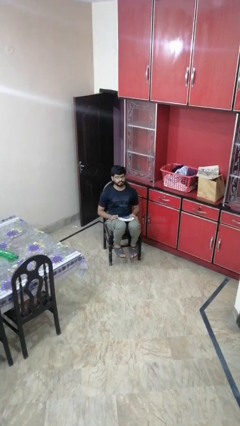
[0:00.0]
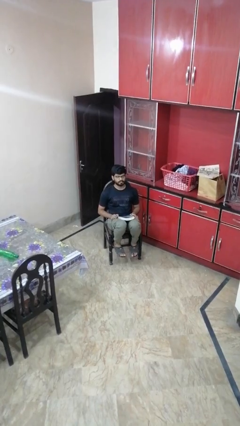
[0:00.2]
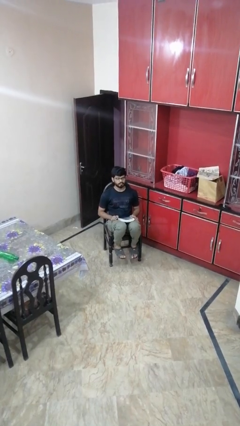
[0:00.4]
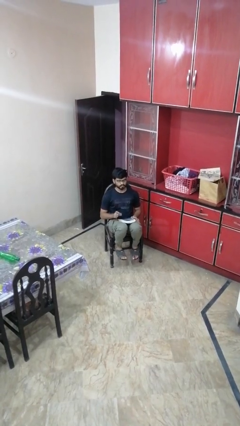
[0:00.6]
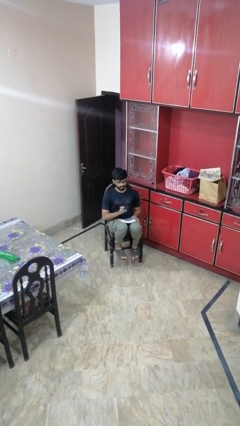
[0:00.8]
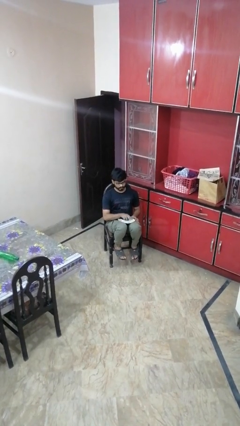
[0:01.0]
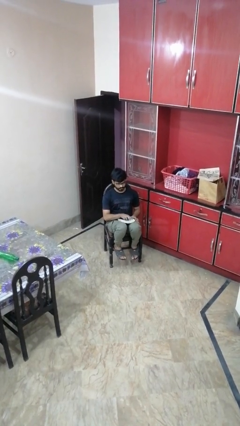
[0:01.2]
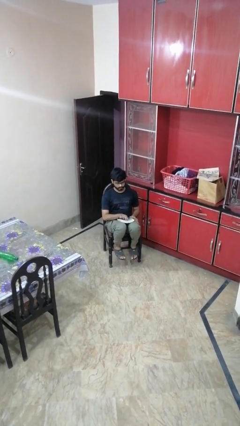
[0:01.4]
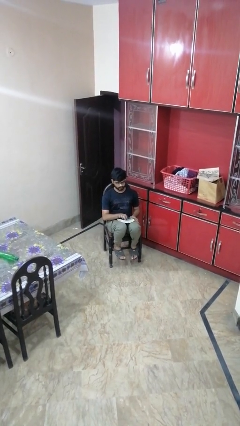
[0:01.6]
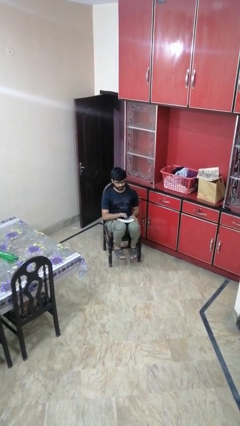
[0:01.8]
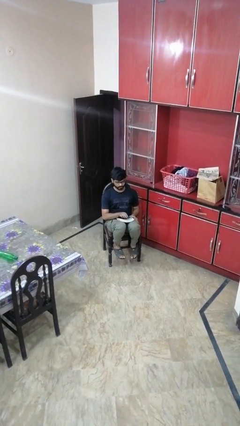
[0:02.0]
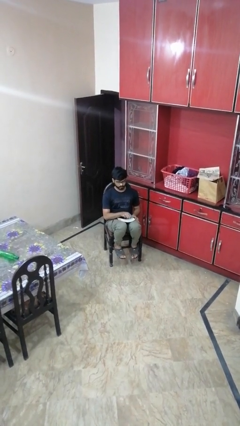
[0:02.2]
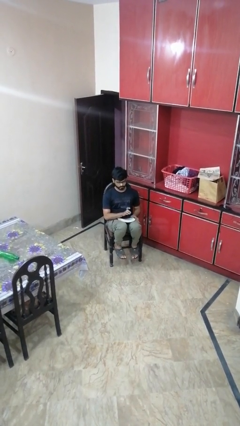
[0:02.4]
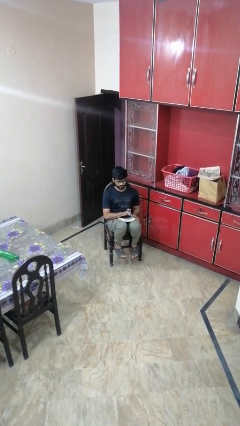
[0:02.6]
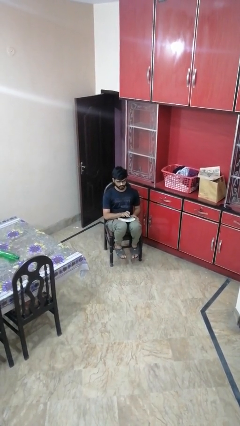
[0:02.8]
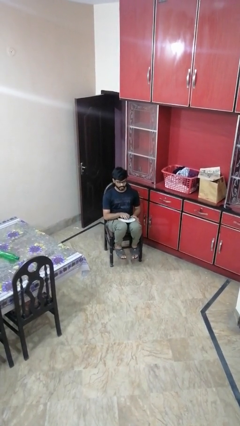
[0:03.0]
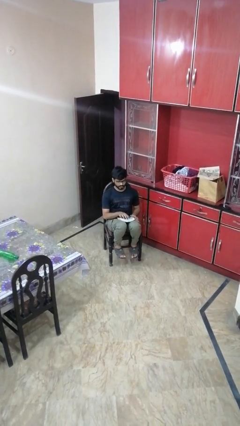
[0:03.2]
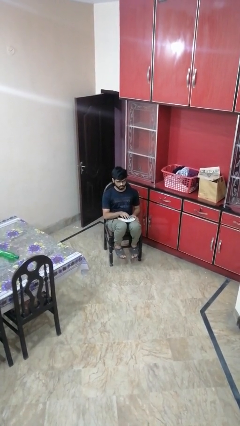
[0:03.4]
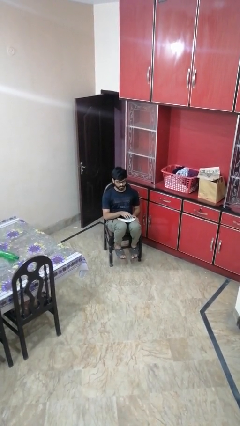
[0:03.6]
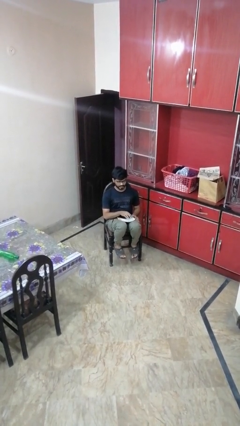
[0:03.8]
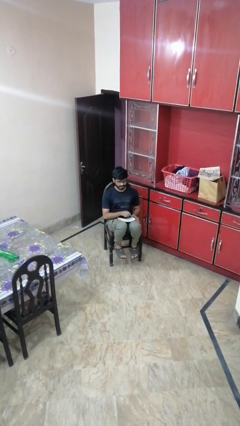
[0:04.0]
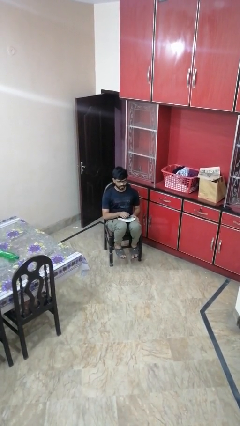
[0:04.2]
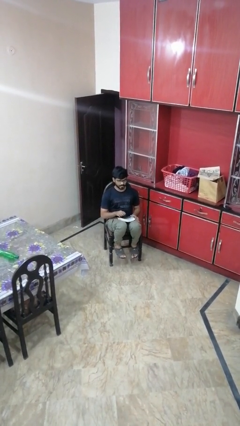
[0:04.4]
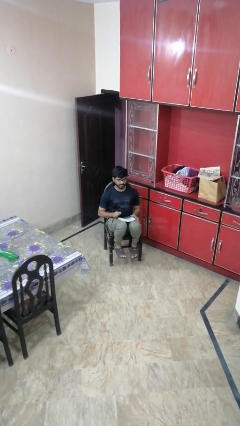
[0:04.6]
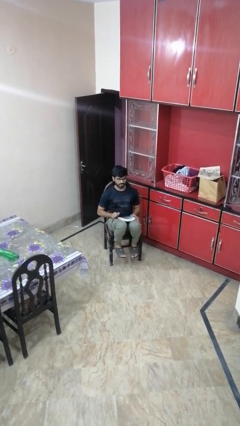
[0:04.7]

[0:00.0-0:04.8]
person taps object with finger

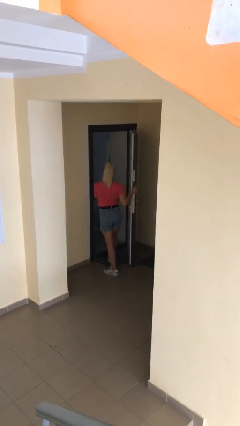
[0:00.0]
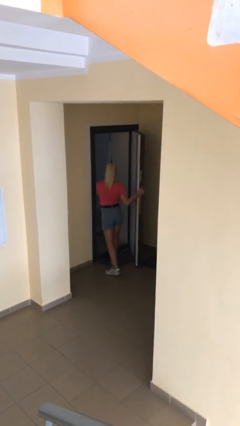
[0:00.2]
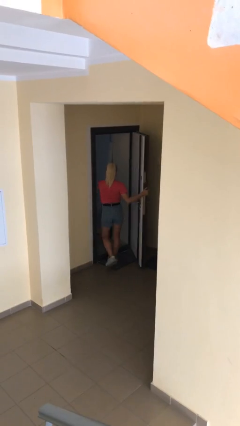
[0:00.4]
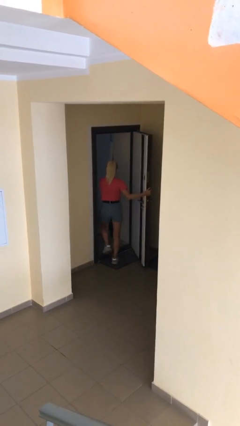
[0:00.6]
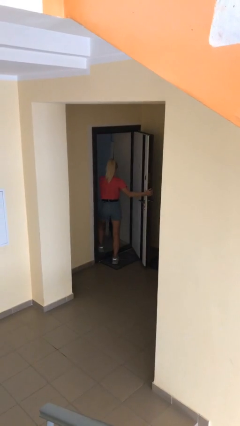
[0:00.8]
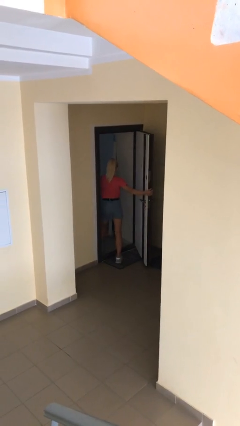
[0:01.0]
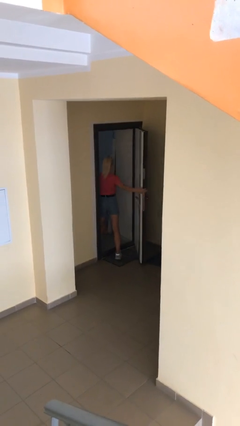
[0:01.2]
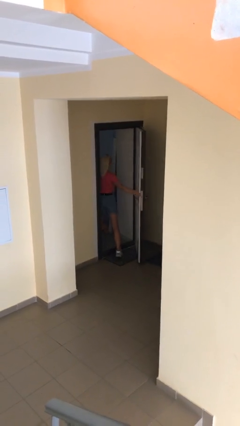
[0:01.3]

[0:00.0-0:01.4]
person exits scene through structure

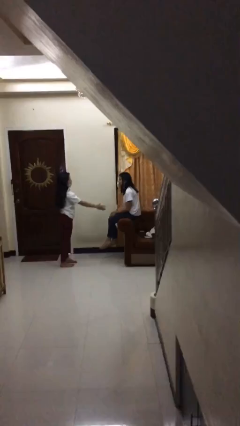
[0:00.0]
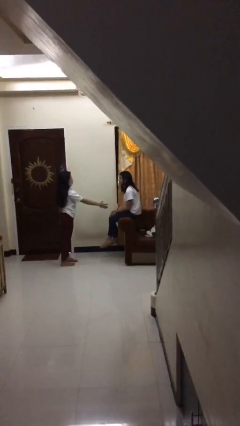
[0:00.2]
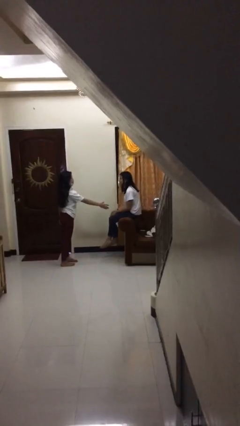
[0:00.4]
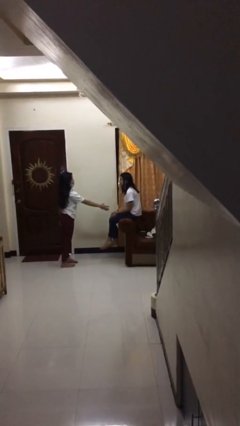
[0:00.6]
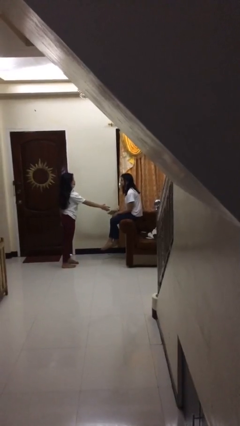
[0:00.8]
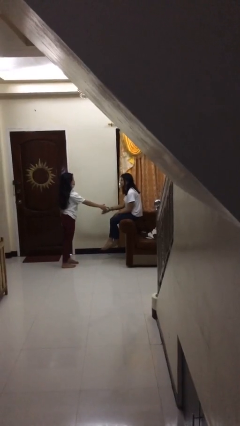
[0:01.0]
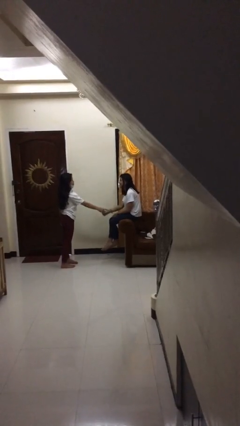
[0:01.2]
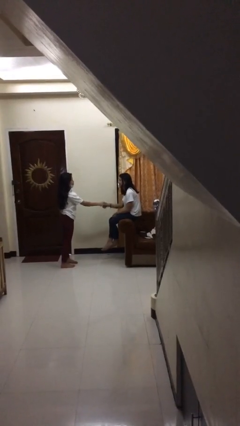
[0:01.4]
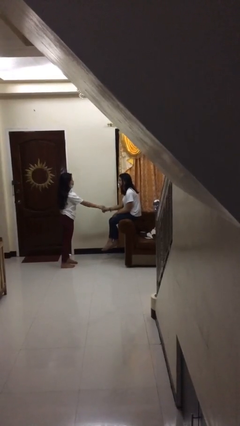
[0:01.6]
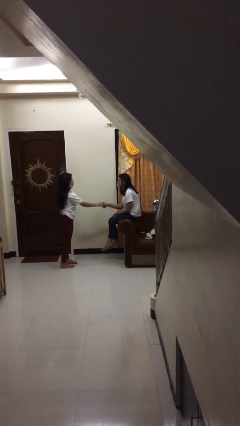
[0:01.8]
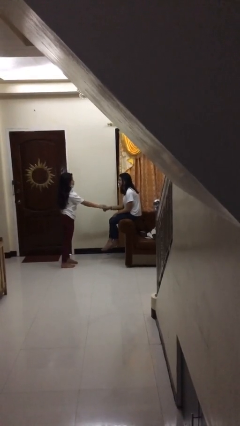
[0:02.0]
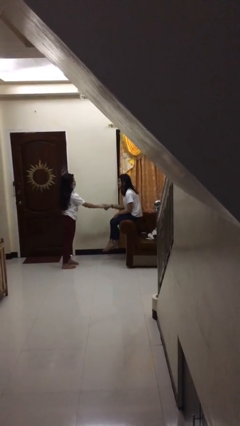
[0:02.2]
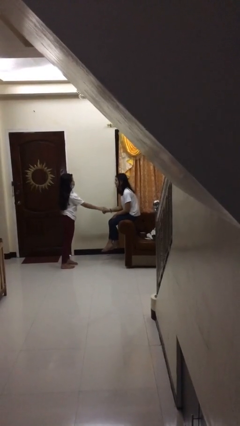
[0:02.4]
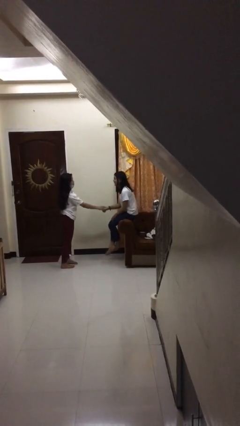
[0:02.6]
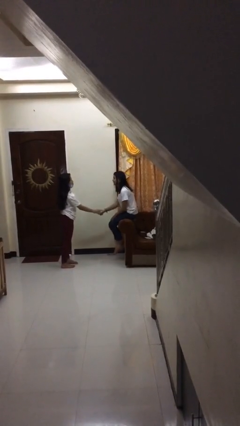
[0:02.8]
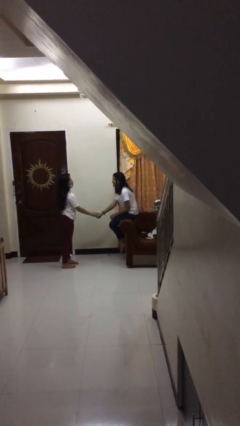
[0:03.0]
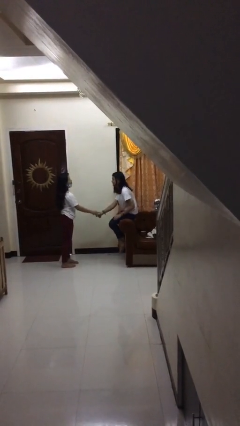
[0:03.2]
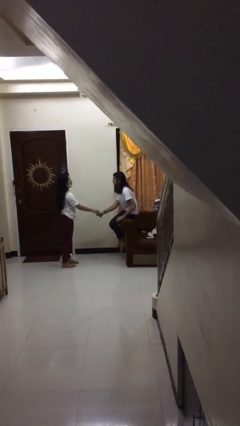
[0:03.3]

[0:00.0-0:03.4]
person shakes hand

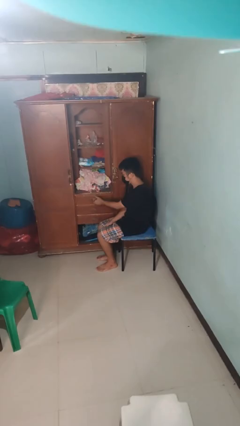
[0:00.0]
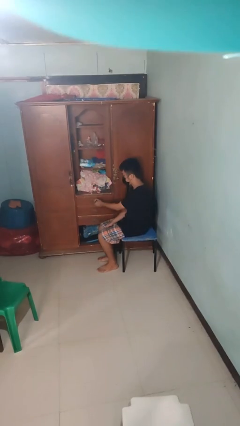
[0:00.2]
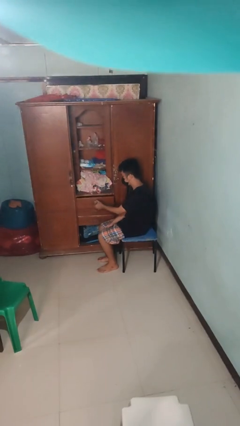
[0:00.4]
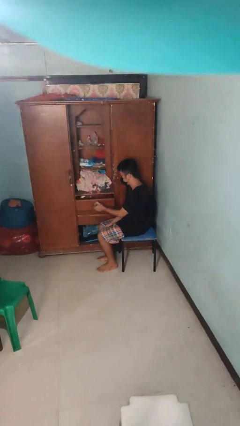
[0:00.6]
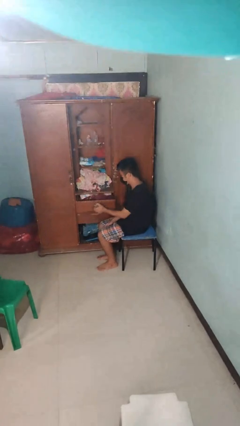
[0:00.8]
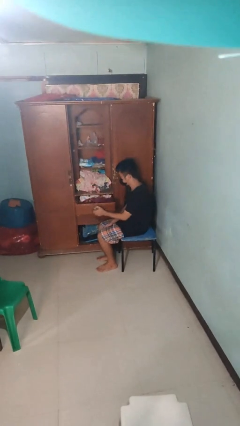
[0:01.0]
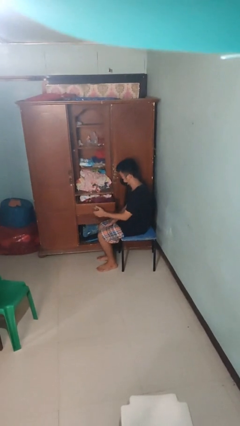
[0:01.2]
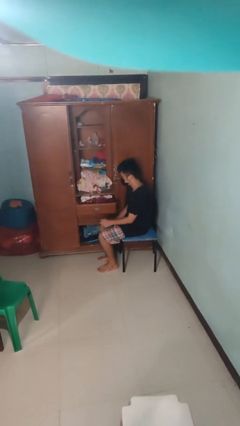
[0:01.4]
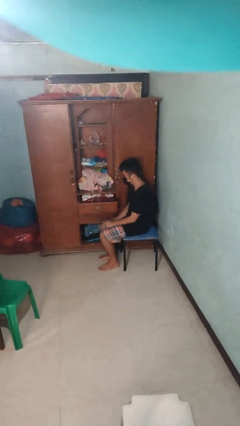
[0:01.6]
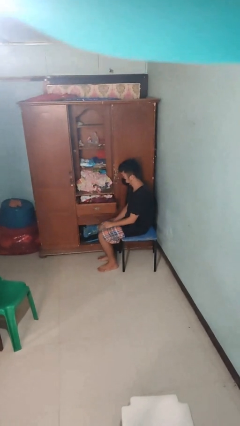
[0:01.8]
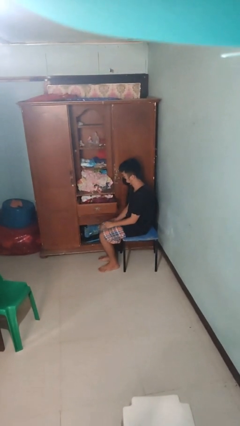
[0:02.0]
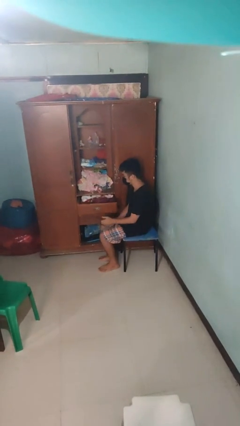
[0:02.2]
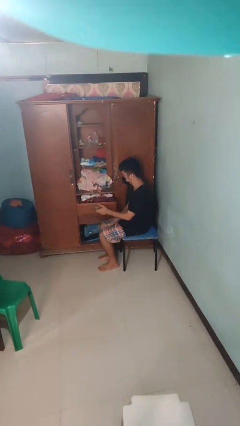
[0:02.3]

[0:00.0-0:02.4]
person opens dresser drawer

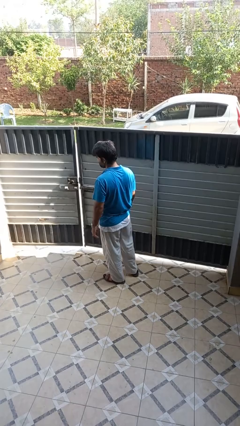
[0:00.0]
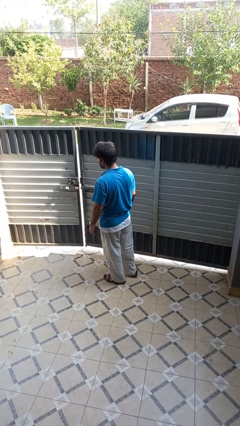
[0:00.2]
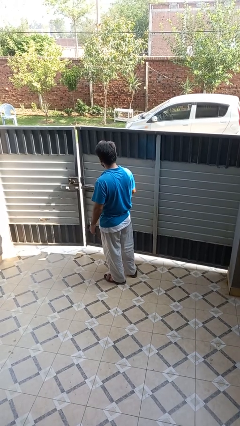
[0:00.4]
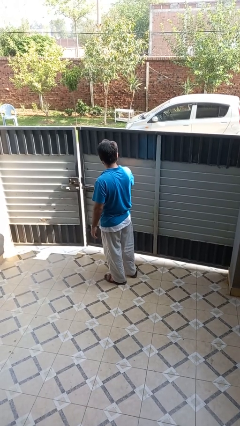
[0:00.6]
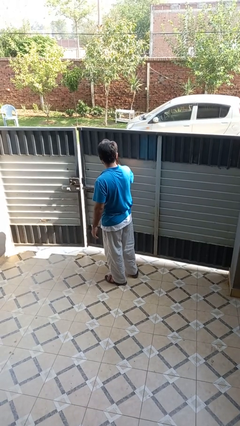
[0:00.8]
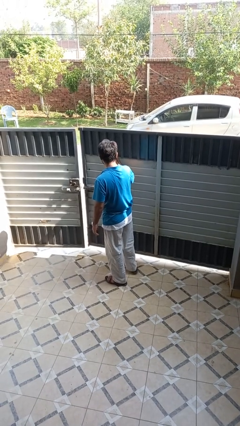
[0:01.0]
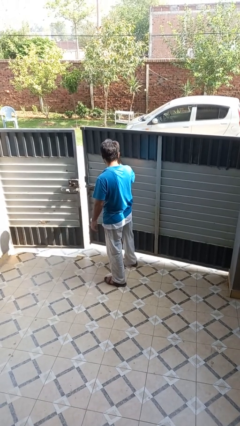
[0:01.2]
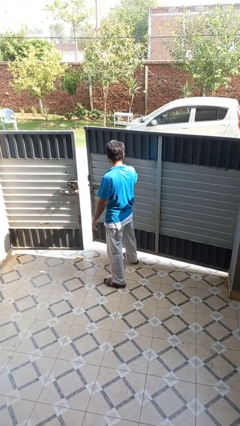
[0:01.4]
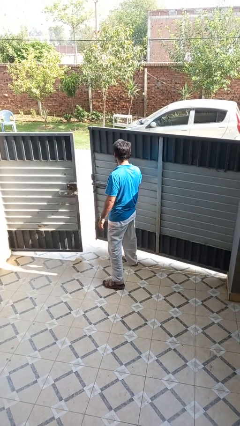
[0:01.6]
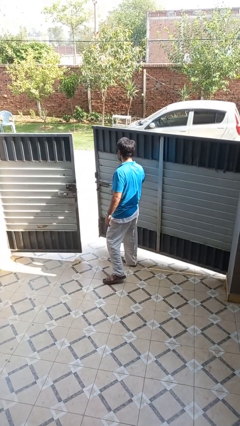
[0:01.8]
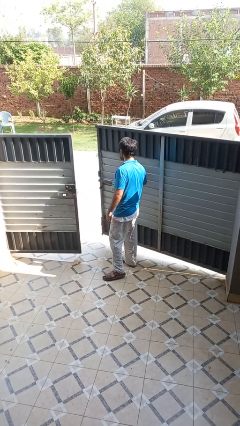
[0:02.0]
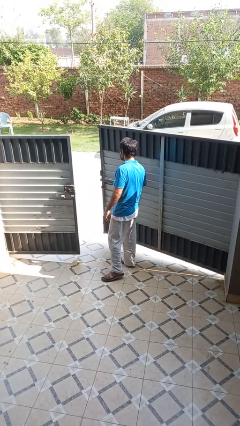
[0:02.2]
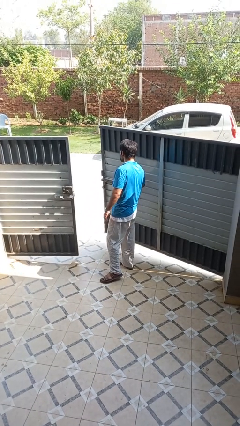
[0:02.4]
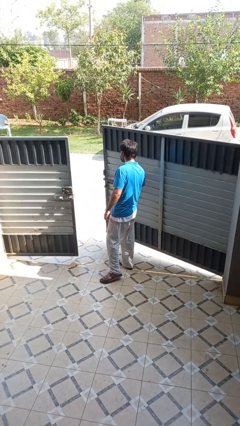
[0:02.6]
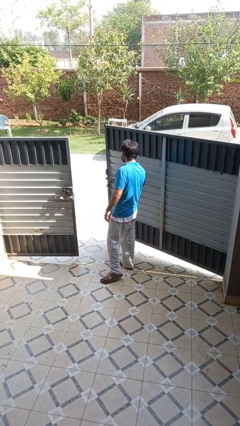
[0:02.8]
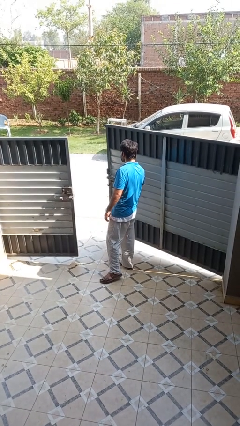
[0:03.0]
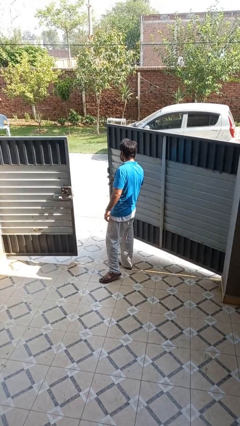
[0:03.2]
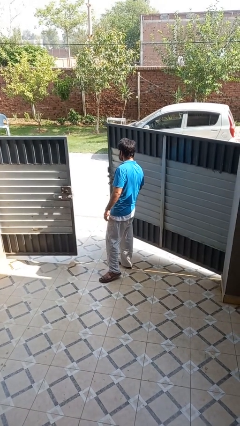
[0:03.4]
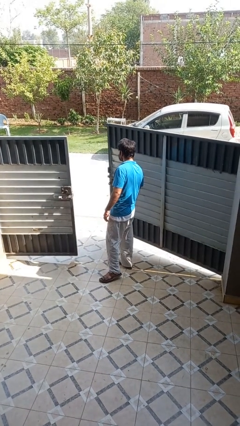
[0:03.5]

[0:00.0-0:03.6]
person opens gate

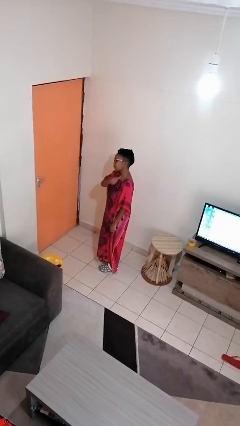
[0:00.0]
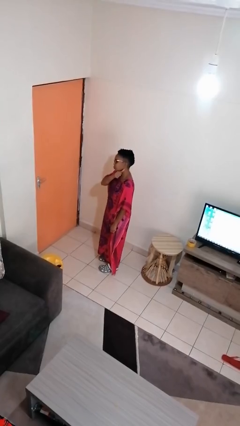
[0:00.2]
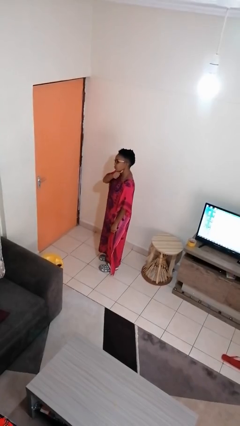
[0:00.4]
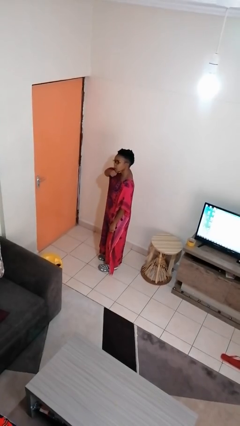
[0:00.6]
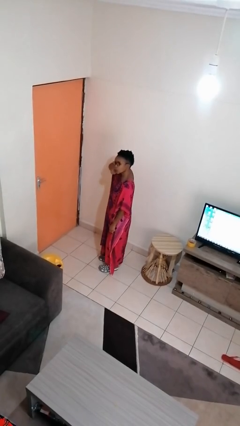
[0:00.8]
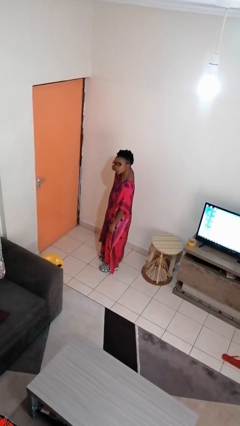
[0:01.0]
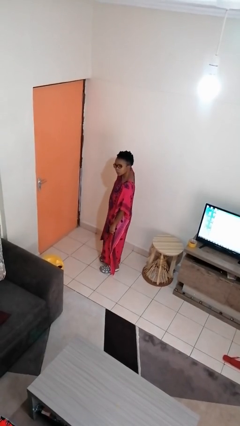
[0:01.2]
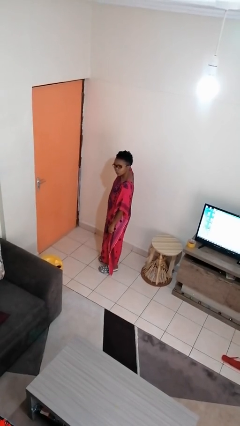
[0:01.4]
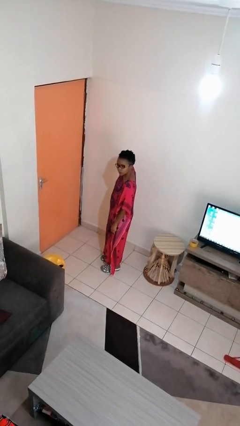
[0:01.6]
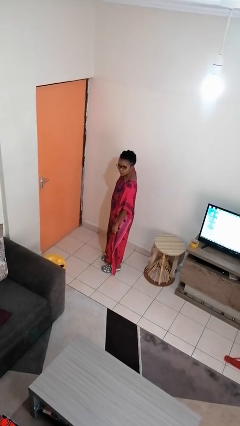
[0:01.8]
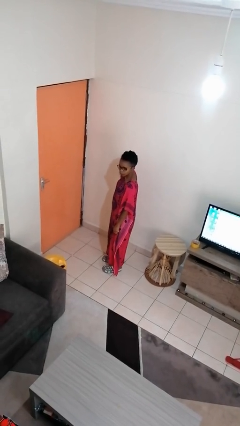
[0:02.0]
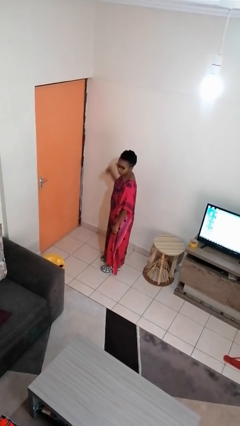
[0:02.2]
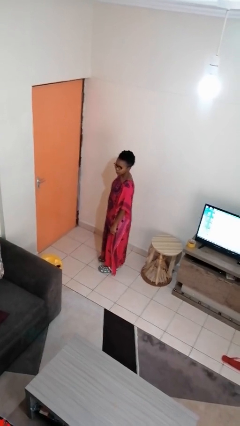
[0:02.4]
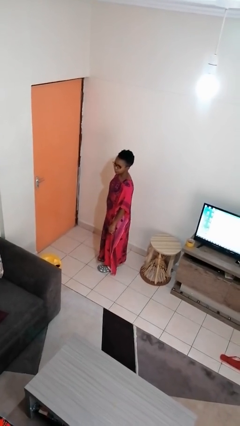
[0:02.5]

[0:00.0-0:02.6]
person gestures cut
